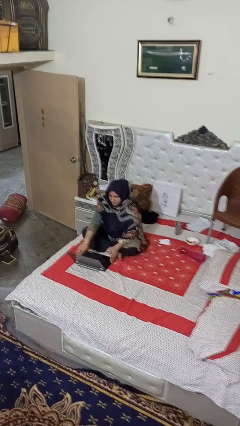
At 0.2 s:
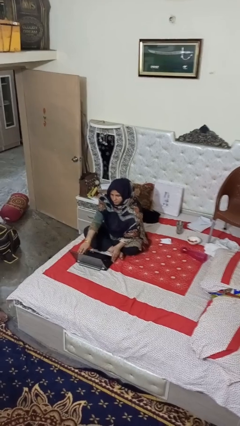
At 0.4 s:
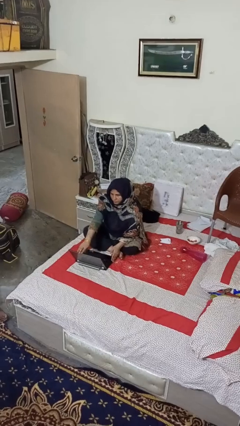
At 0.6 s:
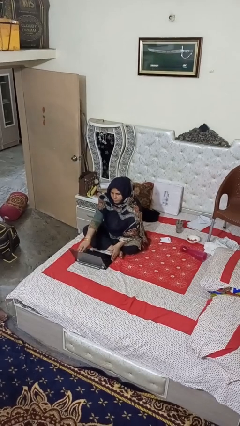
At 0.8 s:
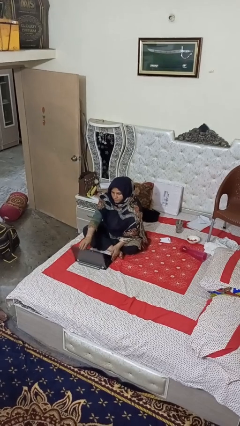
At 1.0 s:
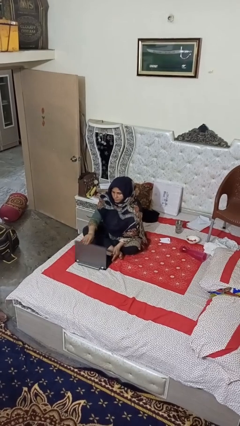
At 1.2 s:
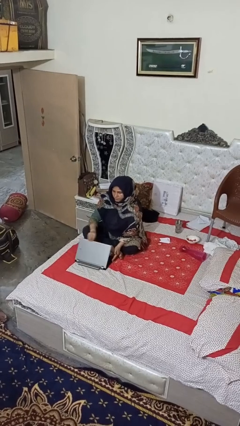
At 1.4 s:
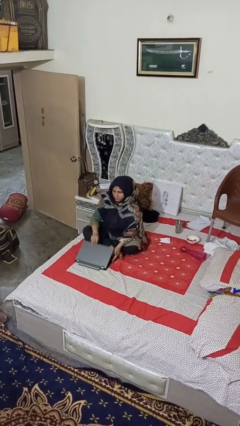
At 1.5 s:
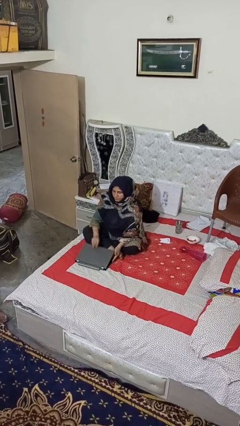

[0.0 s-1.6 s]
person closes laptop

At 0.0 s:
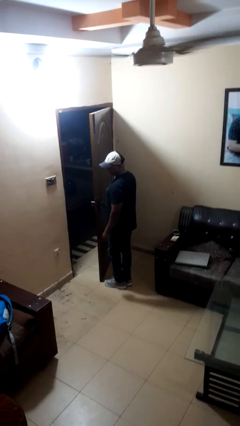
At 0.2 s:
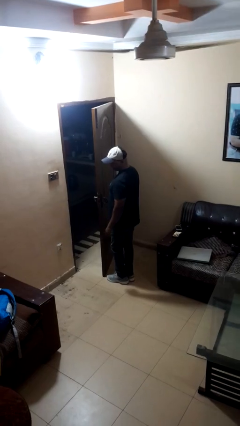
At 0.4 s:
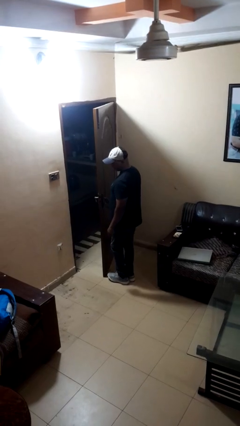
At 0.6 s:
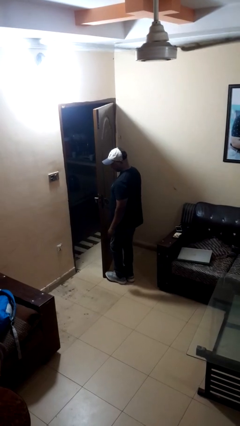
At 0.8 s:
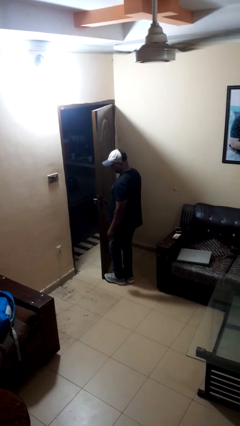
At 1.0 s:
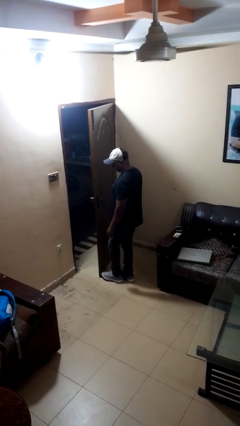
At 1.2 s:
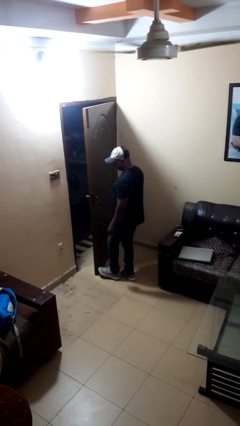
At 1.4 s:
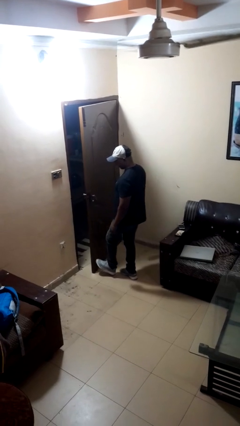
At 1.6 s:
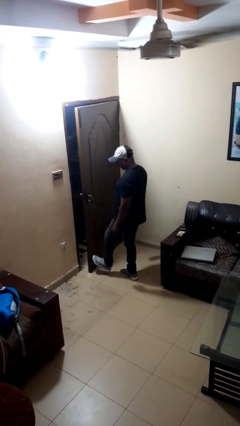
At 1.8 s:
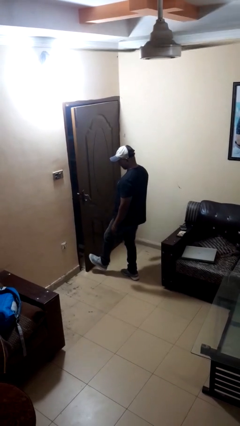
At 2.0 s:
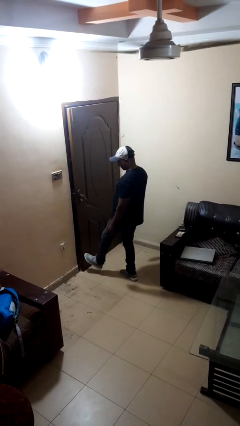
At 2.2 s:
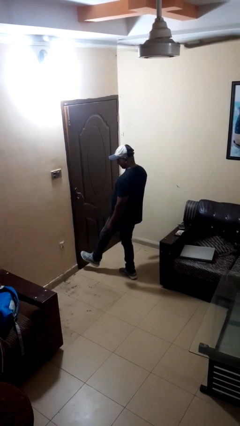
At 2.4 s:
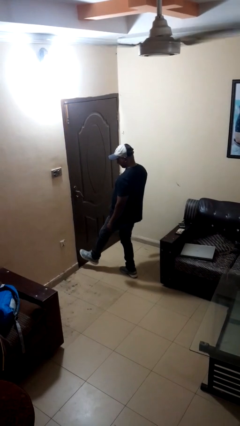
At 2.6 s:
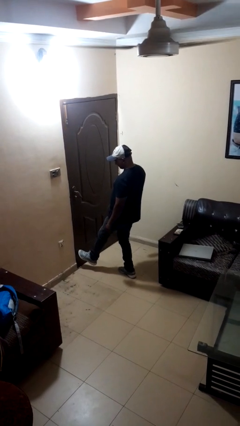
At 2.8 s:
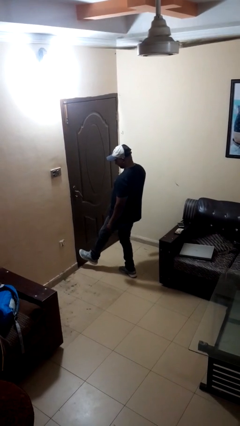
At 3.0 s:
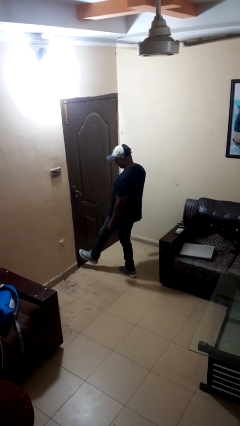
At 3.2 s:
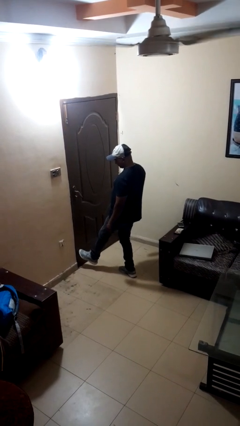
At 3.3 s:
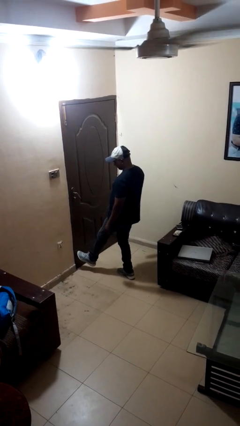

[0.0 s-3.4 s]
person closes door with foot

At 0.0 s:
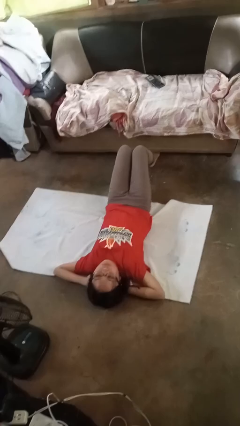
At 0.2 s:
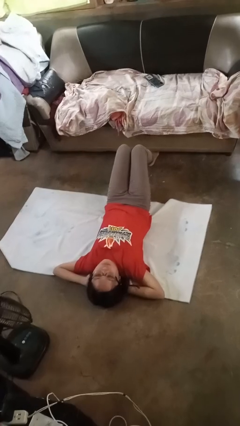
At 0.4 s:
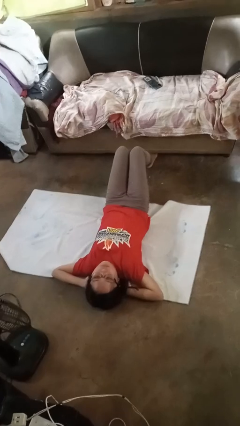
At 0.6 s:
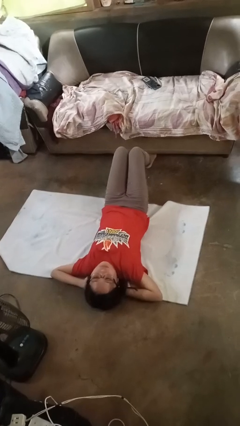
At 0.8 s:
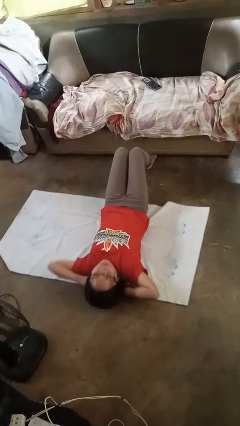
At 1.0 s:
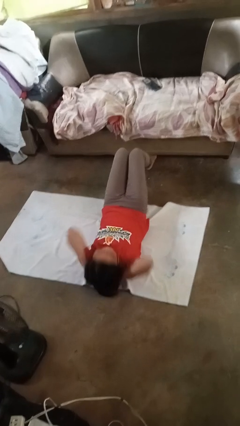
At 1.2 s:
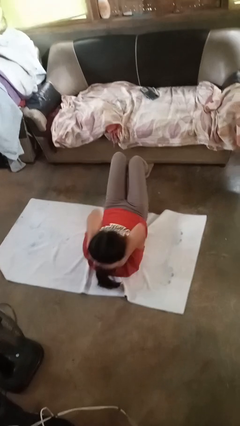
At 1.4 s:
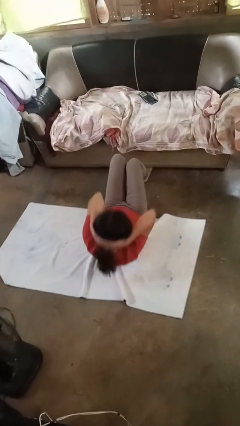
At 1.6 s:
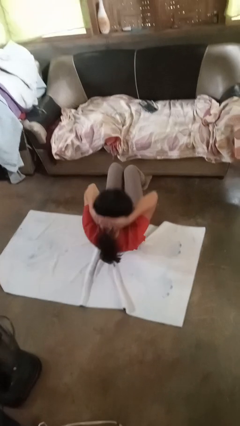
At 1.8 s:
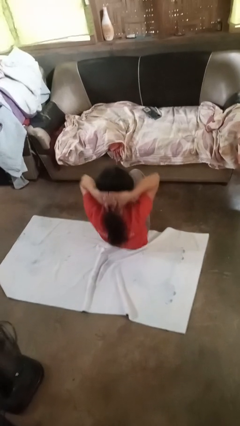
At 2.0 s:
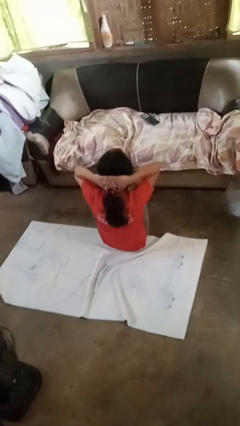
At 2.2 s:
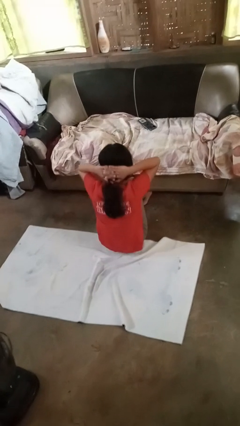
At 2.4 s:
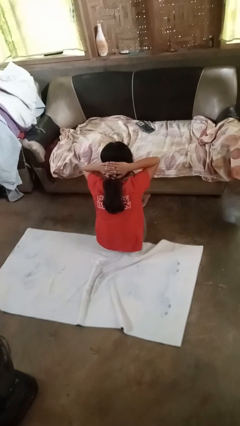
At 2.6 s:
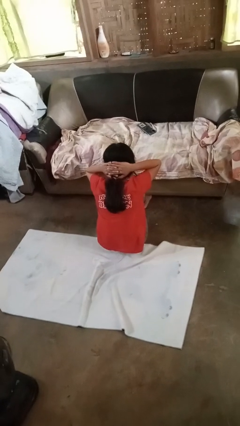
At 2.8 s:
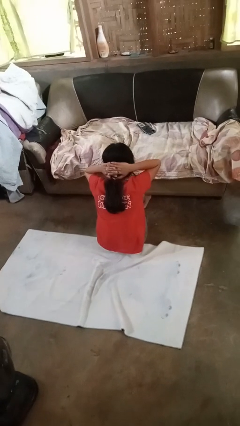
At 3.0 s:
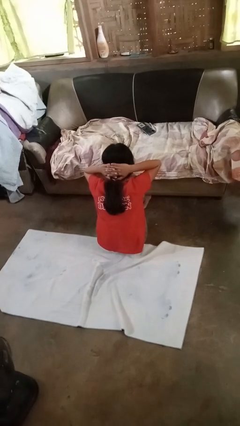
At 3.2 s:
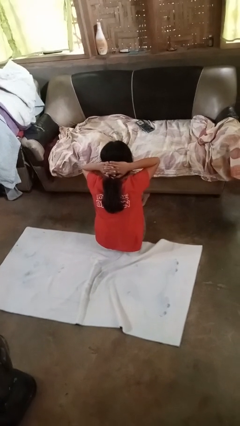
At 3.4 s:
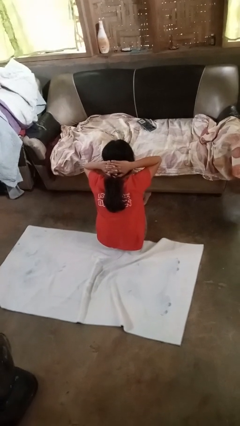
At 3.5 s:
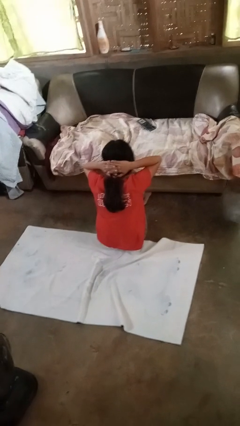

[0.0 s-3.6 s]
person exercises with situp

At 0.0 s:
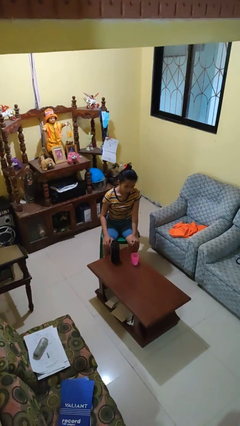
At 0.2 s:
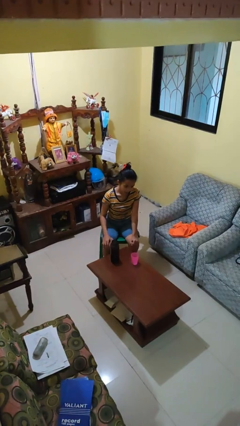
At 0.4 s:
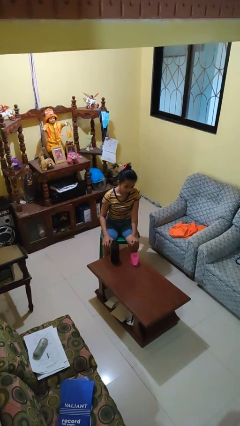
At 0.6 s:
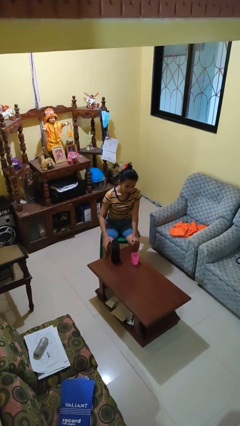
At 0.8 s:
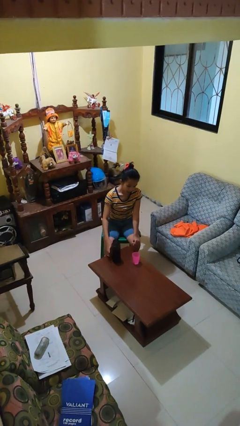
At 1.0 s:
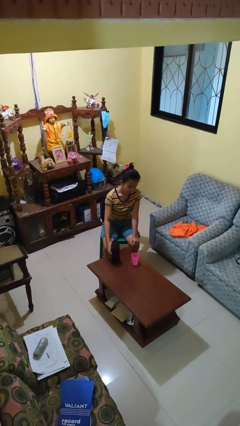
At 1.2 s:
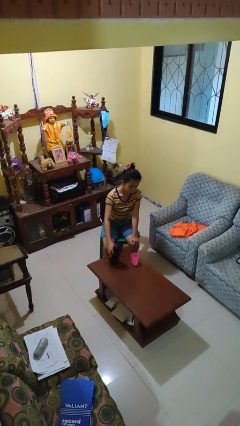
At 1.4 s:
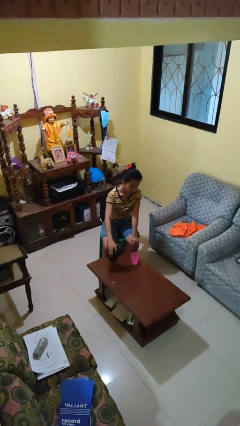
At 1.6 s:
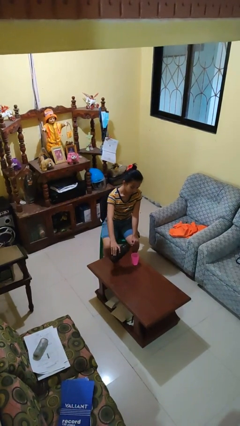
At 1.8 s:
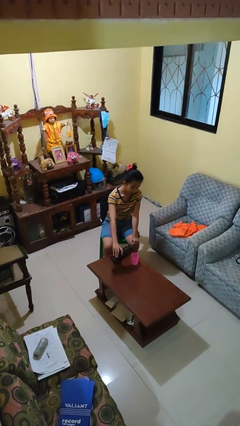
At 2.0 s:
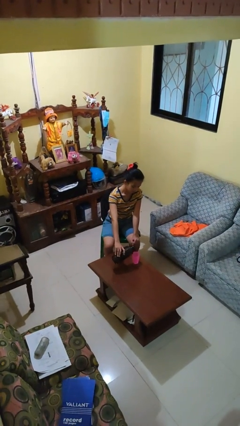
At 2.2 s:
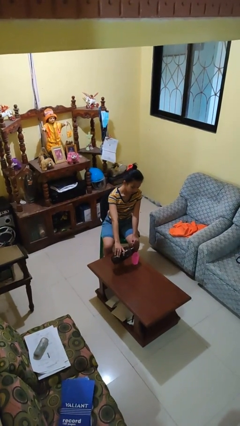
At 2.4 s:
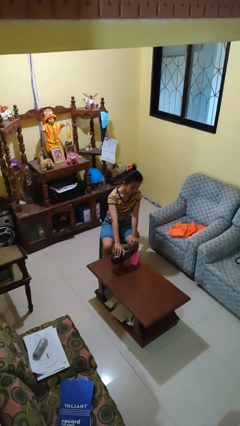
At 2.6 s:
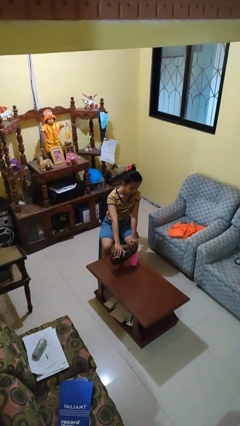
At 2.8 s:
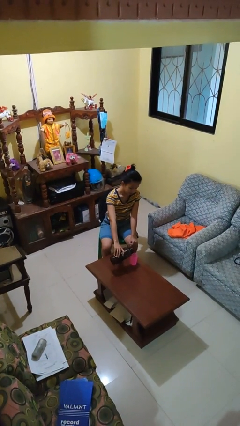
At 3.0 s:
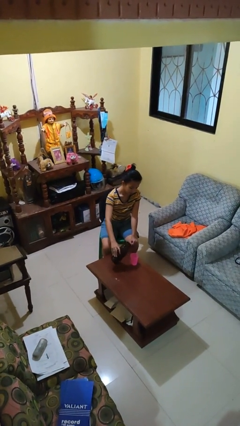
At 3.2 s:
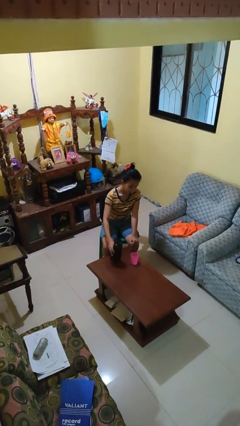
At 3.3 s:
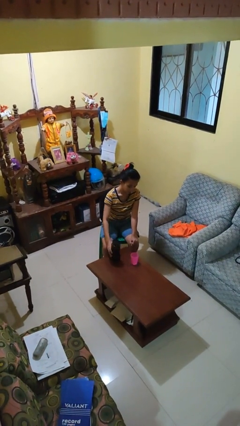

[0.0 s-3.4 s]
person pours liquid into cup

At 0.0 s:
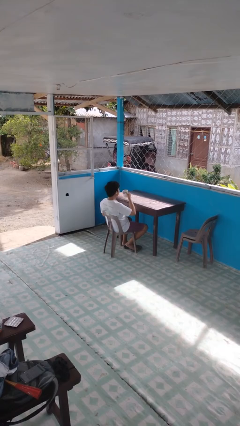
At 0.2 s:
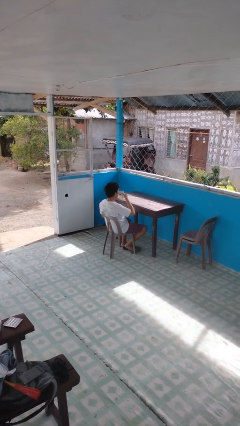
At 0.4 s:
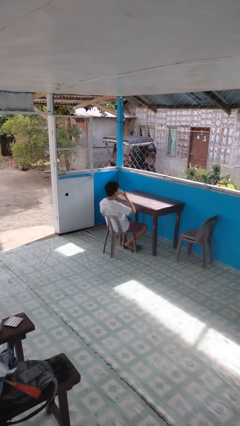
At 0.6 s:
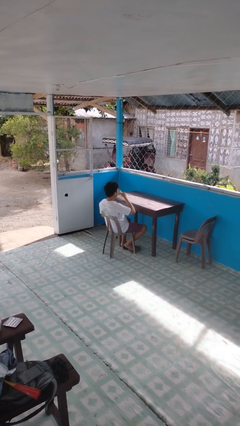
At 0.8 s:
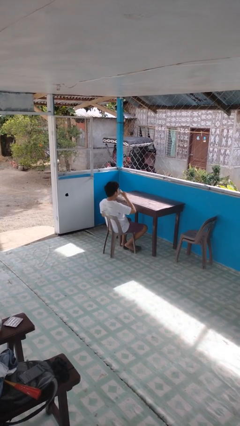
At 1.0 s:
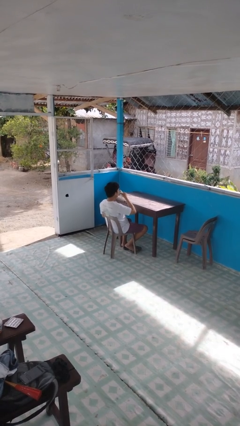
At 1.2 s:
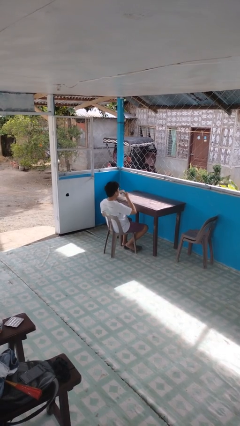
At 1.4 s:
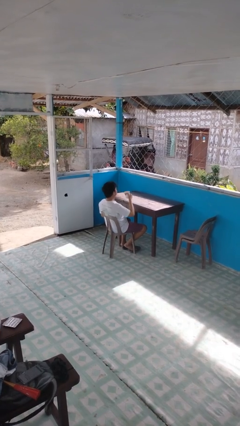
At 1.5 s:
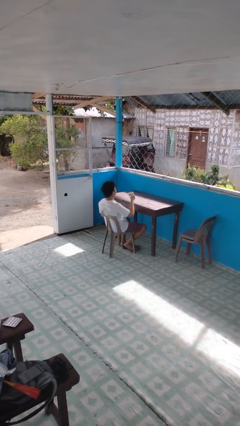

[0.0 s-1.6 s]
person drinks from mug

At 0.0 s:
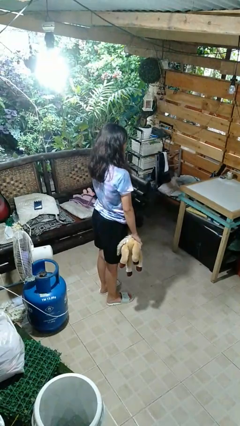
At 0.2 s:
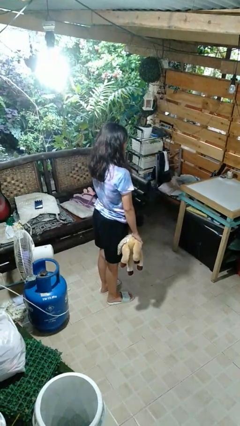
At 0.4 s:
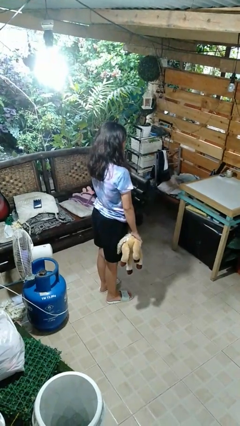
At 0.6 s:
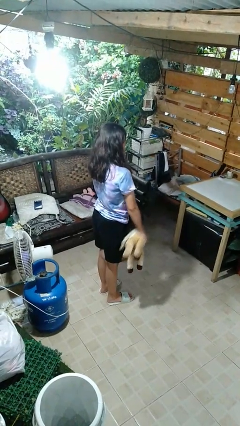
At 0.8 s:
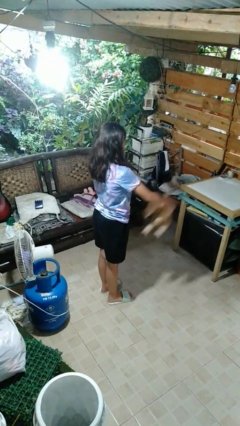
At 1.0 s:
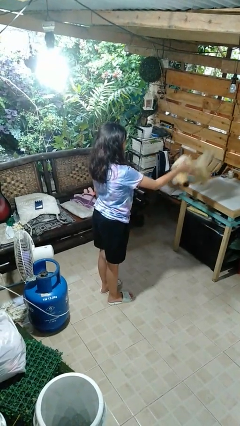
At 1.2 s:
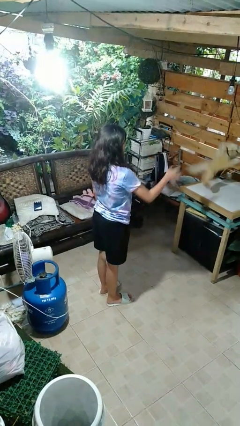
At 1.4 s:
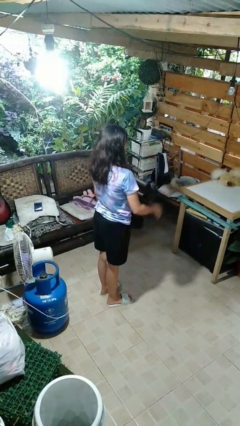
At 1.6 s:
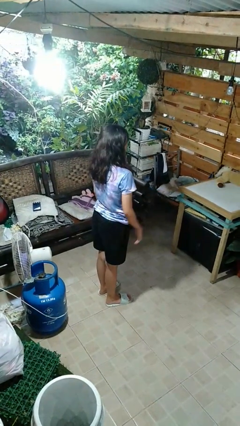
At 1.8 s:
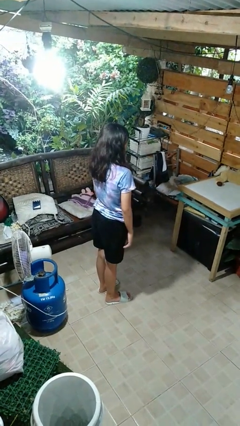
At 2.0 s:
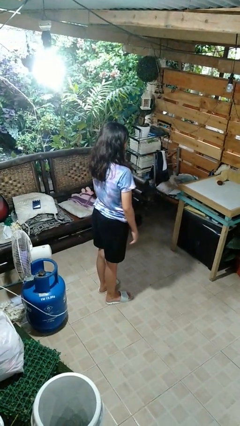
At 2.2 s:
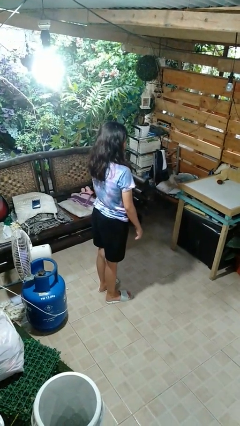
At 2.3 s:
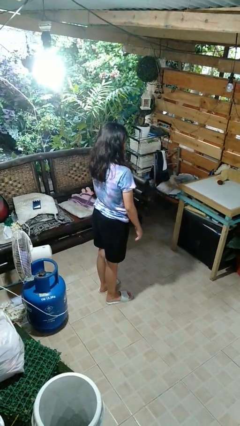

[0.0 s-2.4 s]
person throws object on table

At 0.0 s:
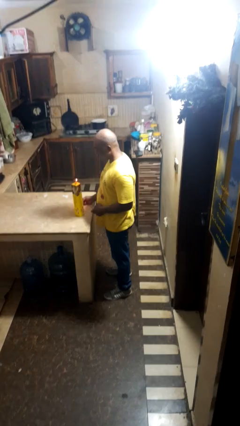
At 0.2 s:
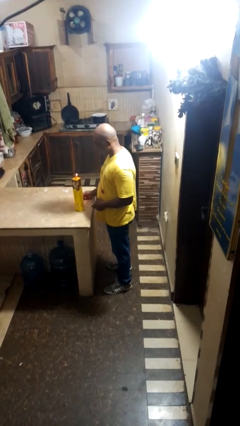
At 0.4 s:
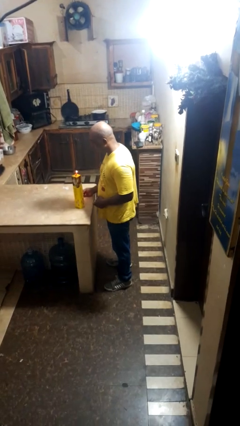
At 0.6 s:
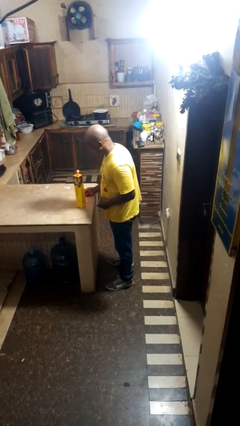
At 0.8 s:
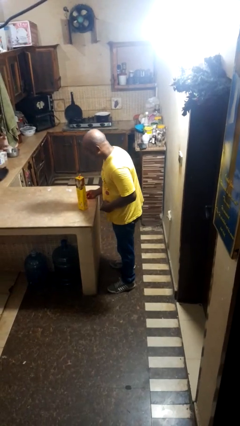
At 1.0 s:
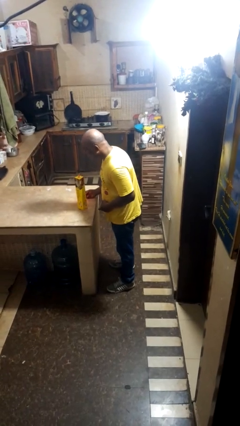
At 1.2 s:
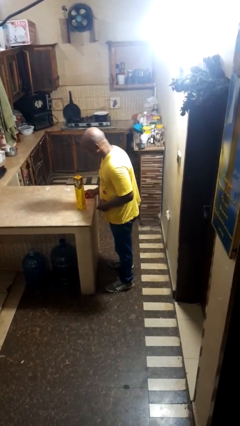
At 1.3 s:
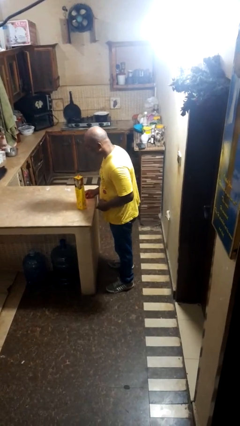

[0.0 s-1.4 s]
person extinguishes candle
